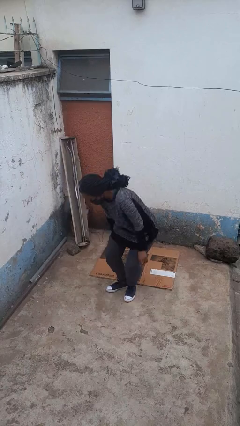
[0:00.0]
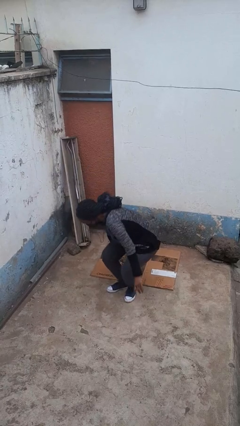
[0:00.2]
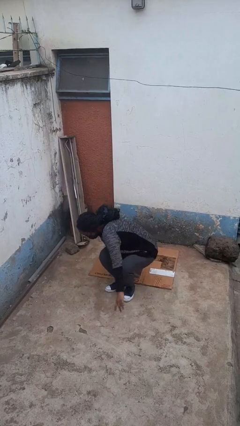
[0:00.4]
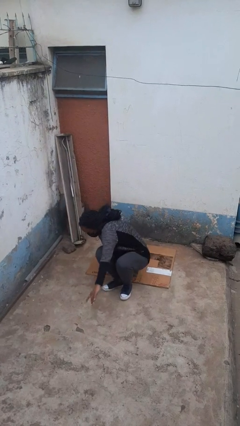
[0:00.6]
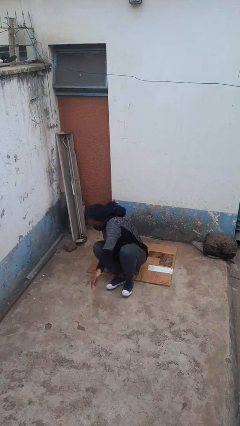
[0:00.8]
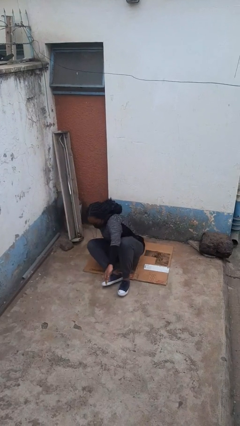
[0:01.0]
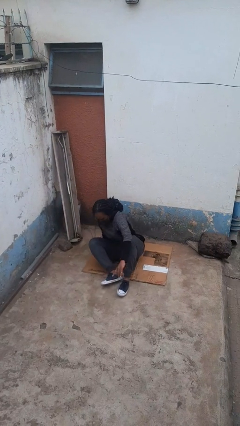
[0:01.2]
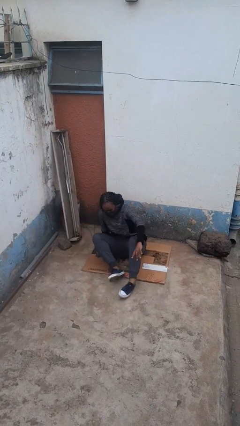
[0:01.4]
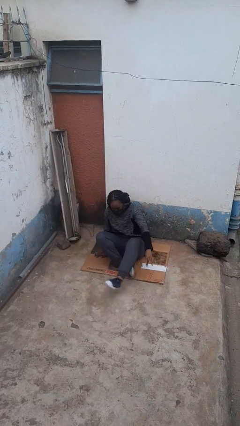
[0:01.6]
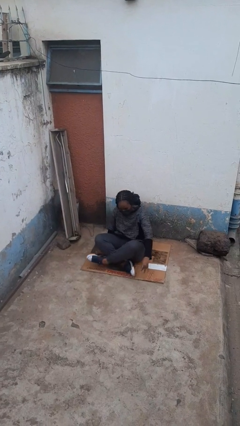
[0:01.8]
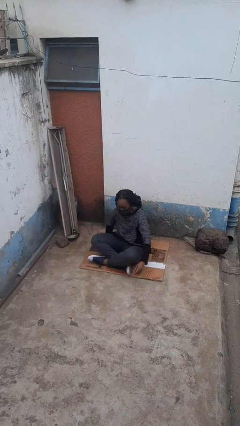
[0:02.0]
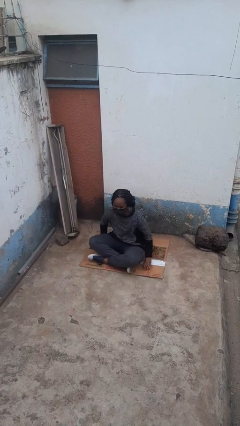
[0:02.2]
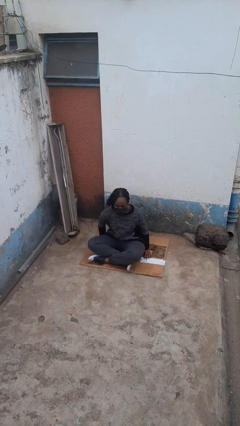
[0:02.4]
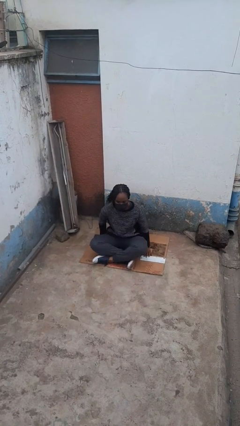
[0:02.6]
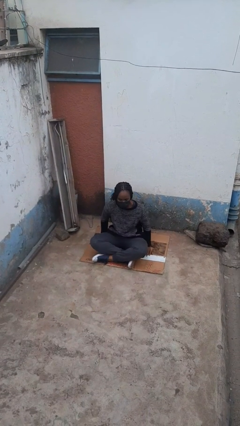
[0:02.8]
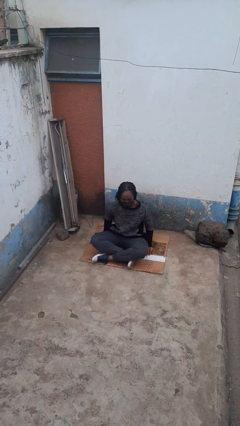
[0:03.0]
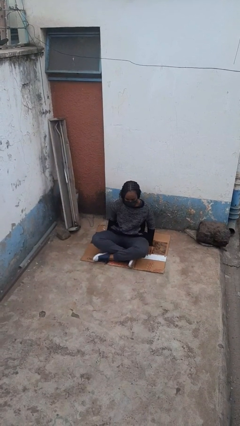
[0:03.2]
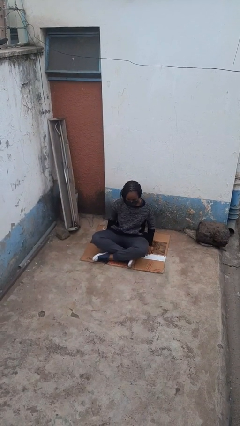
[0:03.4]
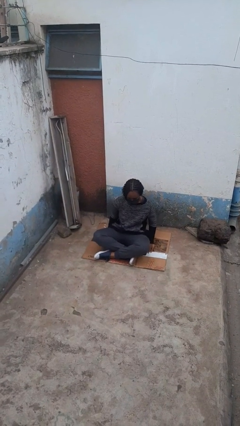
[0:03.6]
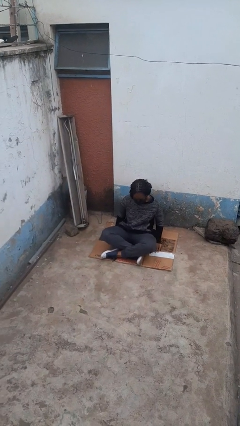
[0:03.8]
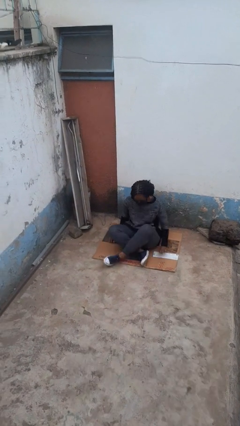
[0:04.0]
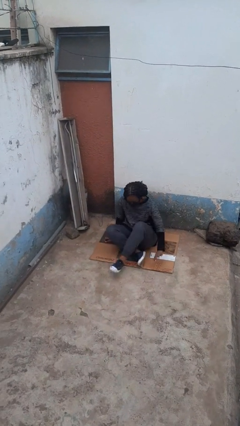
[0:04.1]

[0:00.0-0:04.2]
person sits crisscross

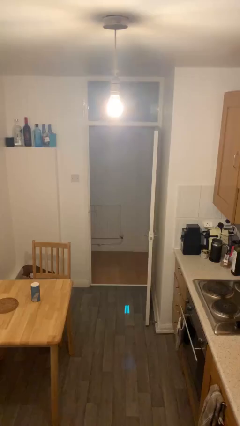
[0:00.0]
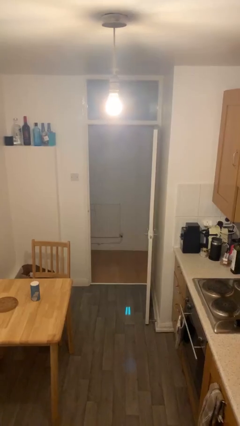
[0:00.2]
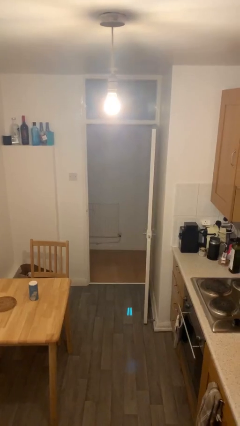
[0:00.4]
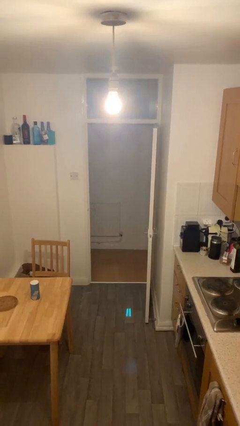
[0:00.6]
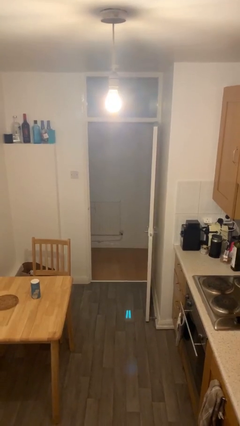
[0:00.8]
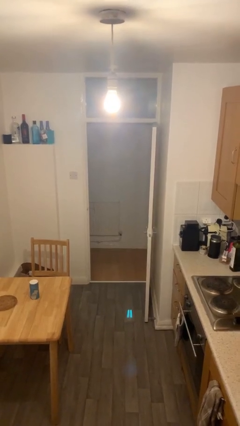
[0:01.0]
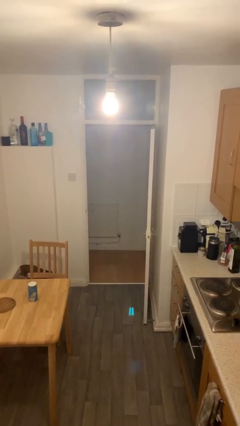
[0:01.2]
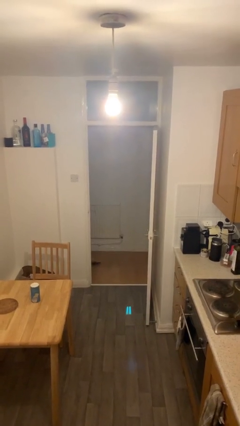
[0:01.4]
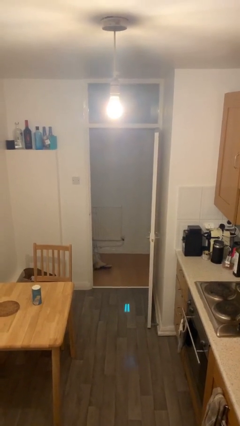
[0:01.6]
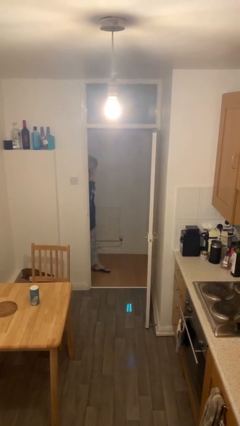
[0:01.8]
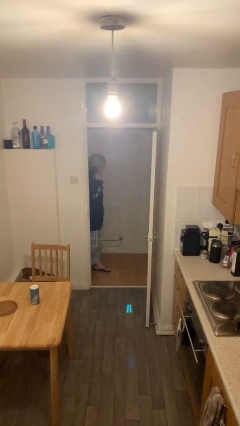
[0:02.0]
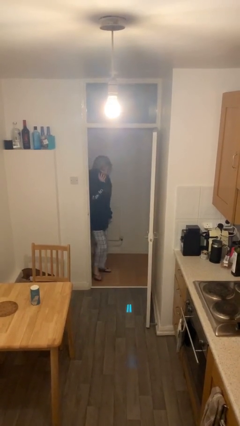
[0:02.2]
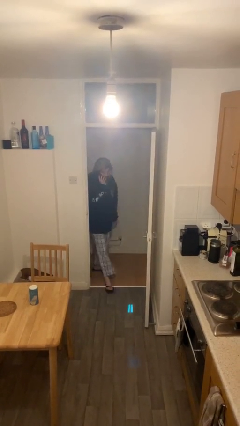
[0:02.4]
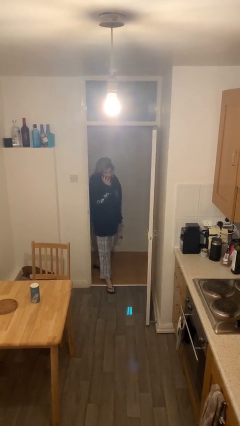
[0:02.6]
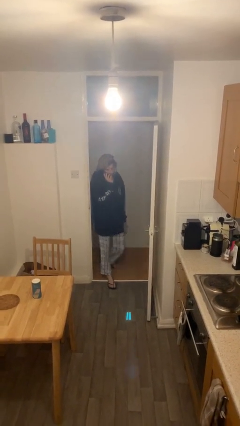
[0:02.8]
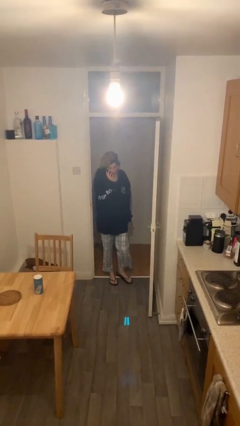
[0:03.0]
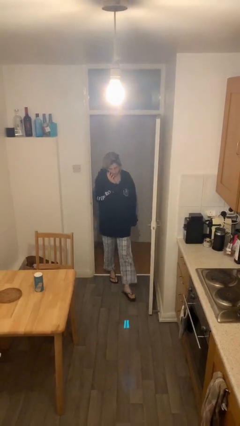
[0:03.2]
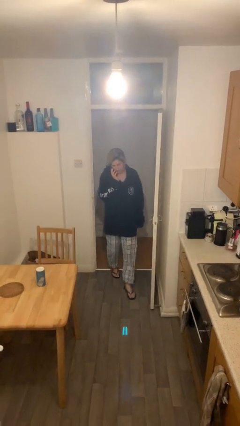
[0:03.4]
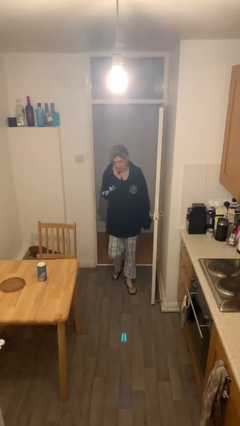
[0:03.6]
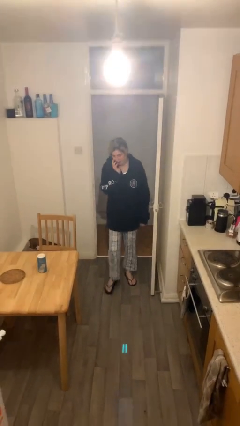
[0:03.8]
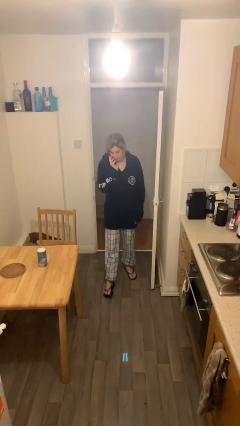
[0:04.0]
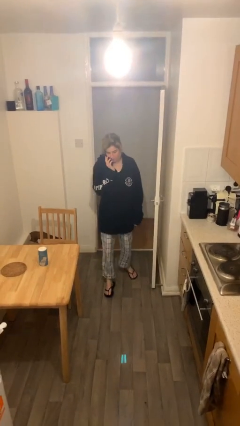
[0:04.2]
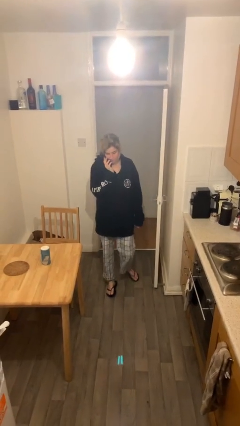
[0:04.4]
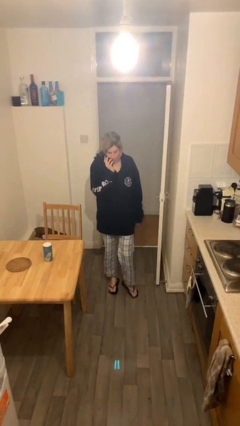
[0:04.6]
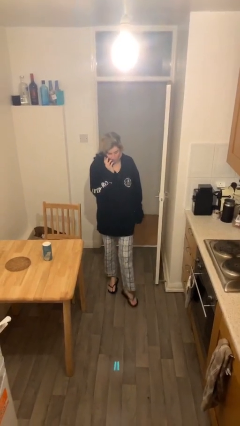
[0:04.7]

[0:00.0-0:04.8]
person enters scene through structure

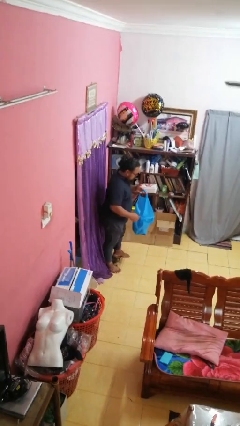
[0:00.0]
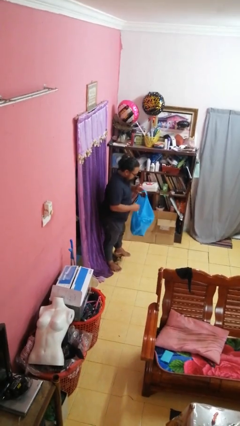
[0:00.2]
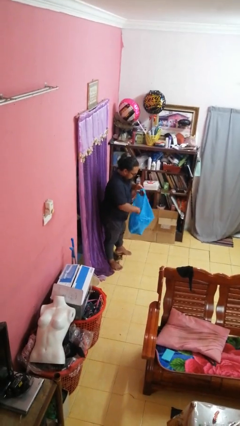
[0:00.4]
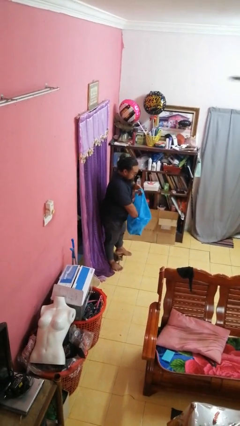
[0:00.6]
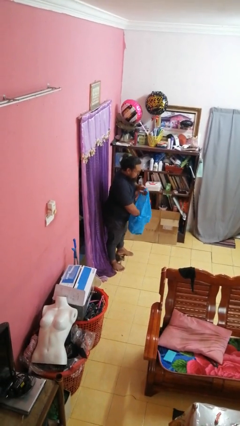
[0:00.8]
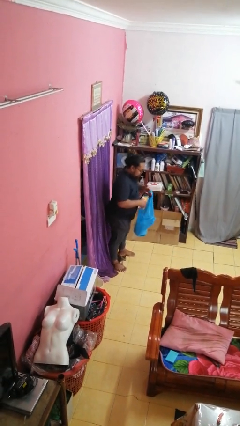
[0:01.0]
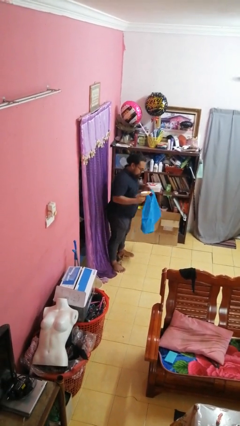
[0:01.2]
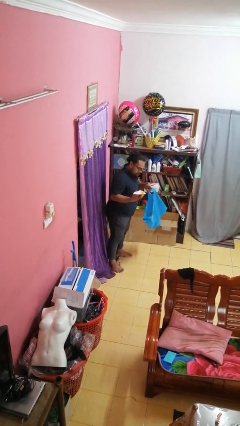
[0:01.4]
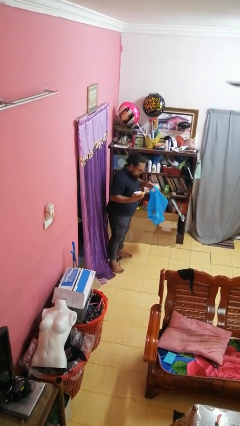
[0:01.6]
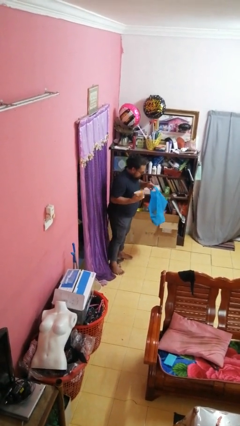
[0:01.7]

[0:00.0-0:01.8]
person takes object from bag

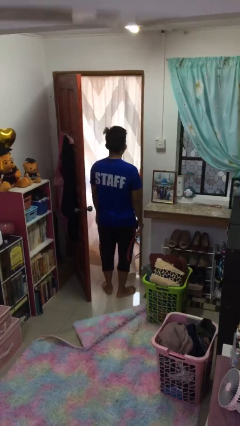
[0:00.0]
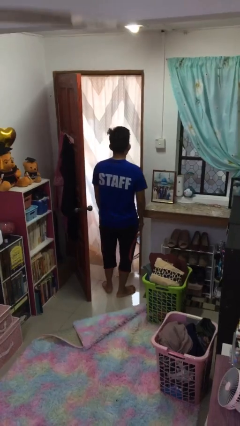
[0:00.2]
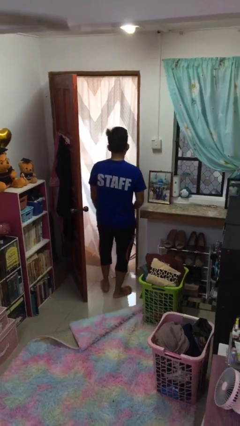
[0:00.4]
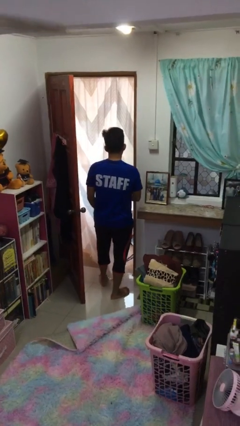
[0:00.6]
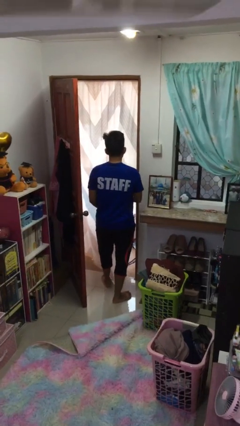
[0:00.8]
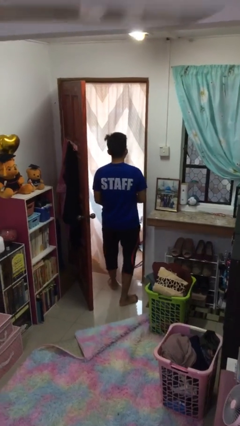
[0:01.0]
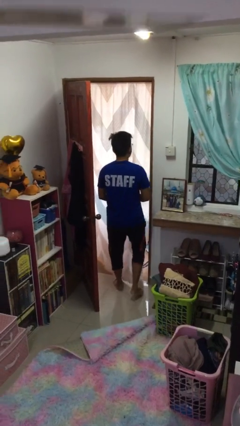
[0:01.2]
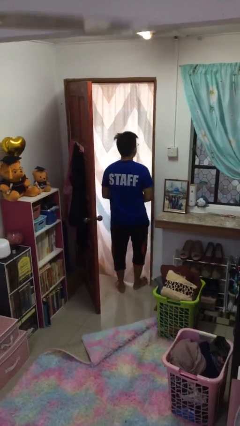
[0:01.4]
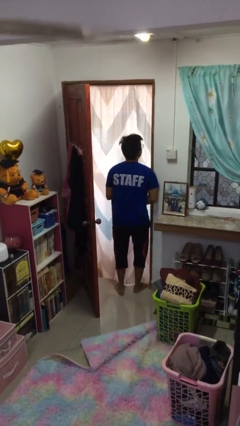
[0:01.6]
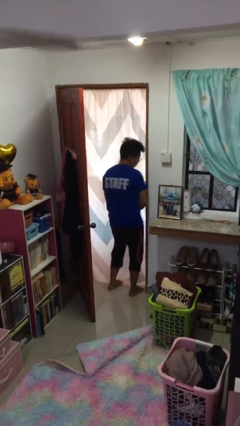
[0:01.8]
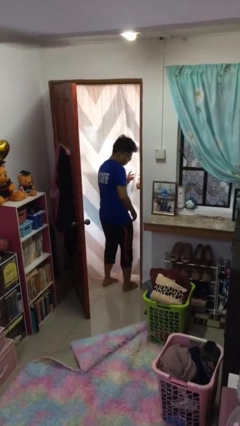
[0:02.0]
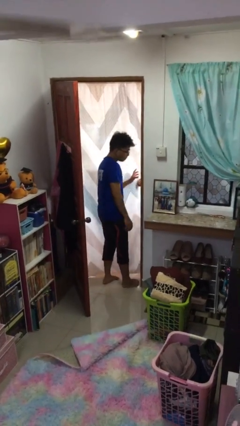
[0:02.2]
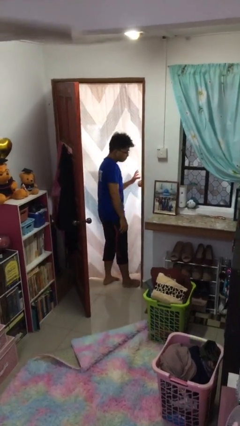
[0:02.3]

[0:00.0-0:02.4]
person bumps into wall

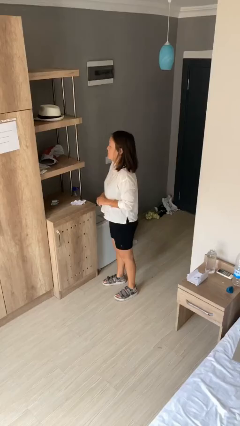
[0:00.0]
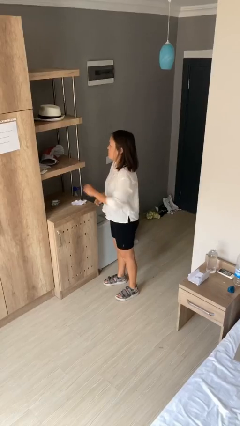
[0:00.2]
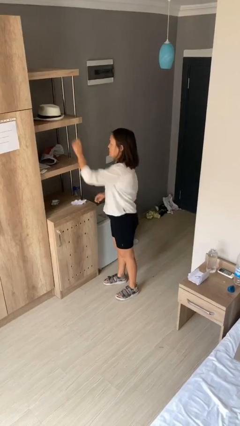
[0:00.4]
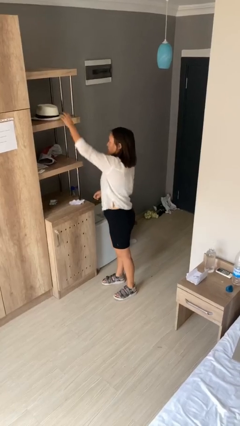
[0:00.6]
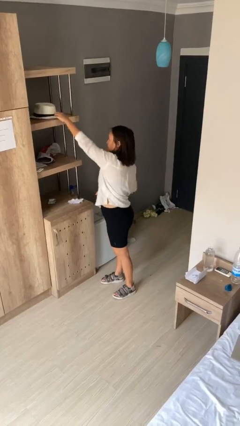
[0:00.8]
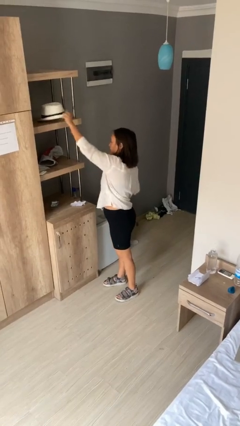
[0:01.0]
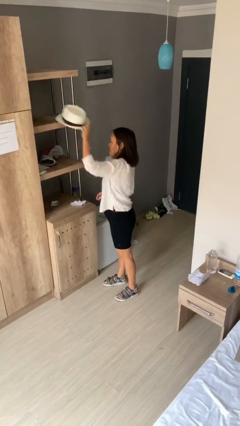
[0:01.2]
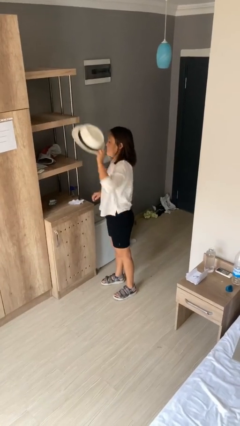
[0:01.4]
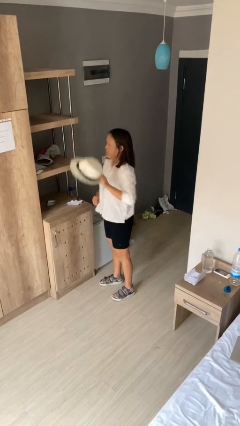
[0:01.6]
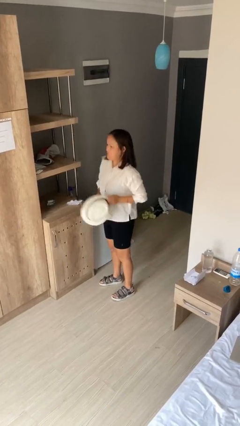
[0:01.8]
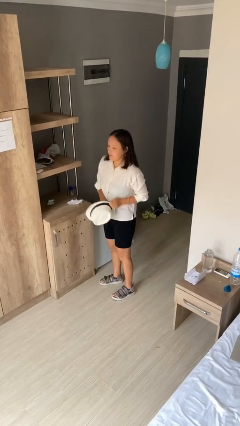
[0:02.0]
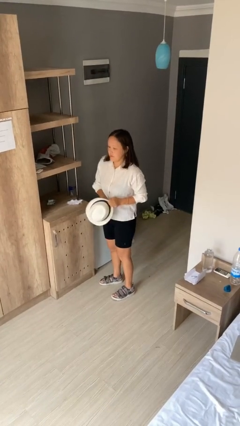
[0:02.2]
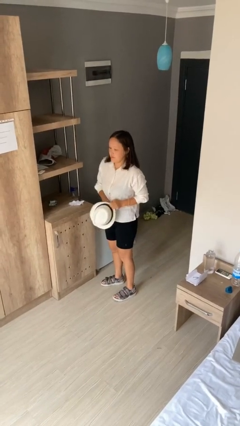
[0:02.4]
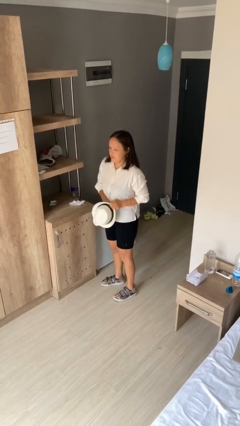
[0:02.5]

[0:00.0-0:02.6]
person picks up object from shelf

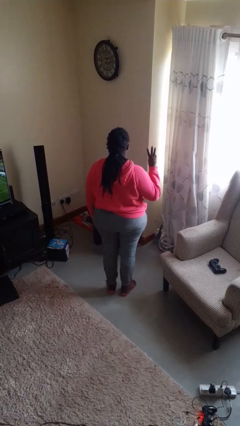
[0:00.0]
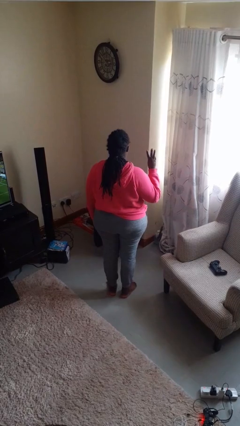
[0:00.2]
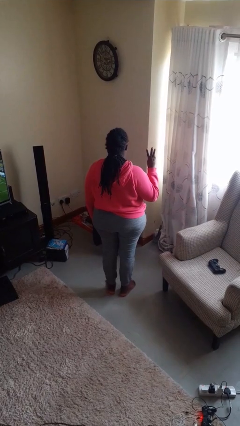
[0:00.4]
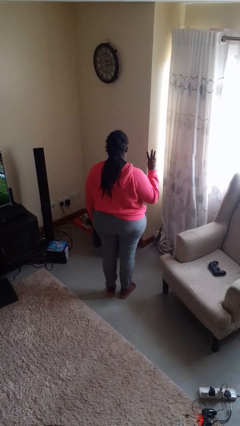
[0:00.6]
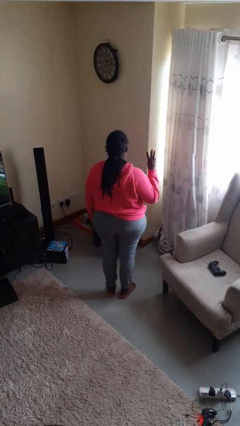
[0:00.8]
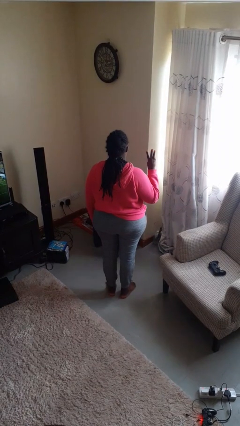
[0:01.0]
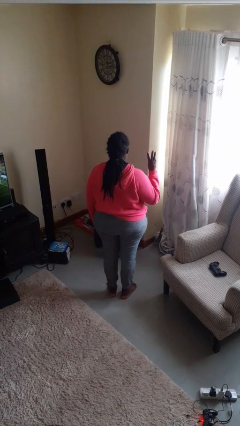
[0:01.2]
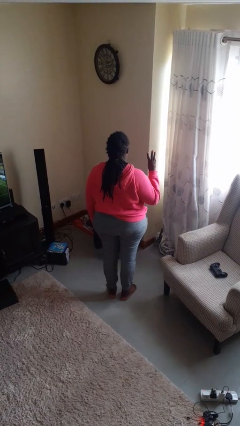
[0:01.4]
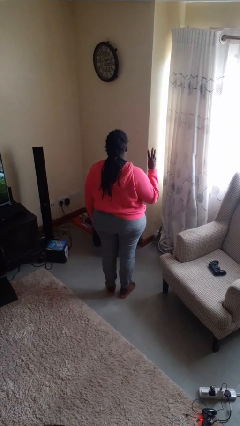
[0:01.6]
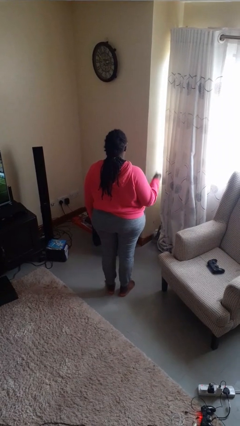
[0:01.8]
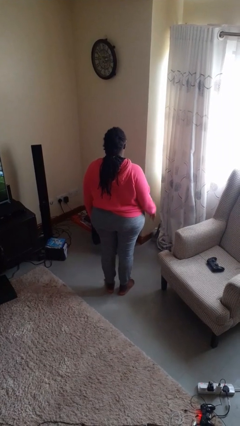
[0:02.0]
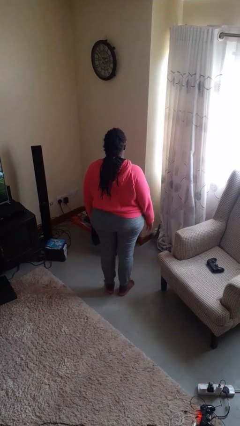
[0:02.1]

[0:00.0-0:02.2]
person gestures number three
